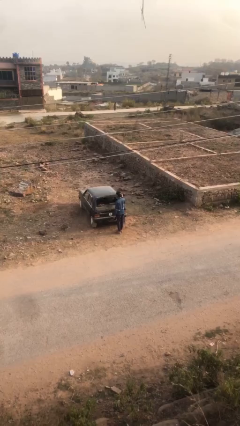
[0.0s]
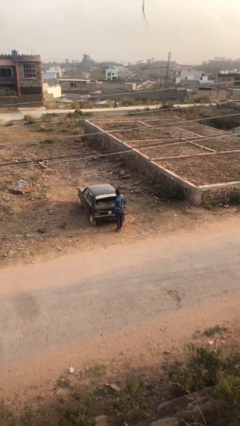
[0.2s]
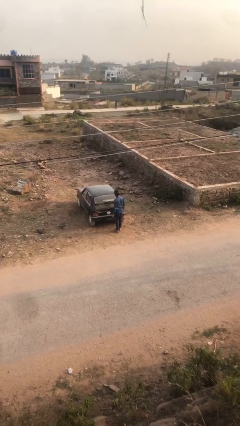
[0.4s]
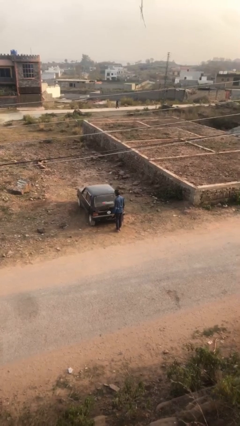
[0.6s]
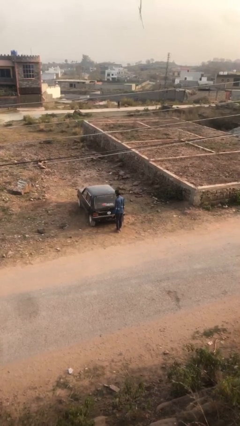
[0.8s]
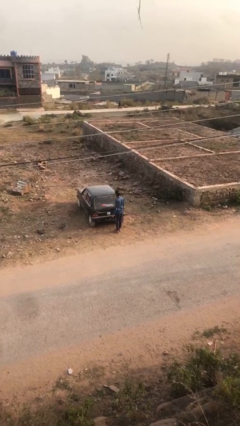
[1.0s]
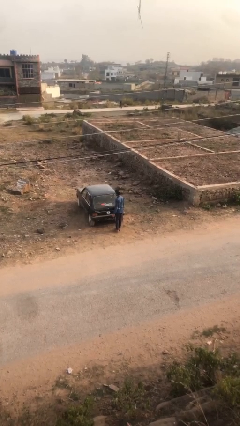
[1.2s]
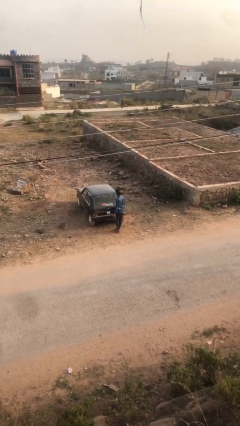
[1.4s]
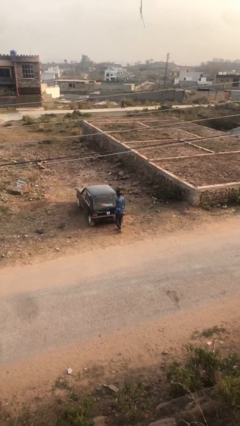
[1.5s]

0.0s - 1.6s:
person closes car trunk

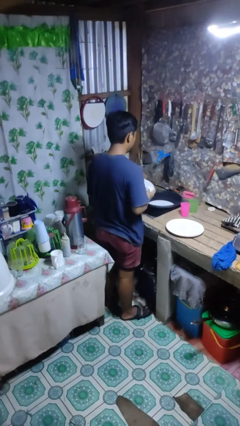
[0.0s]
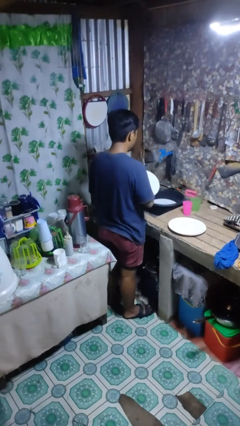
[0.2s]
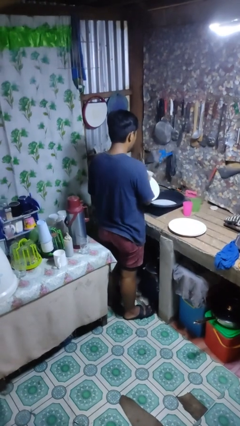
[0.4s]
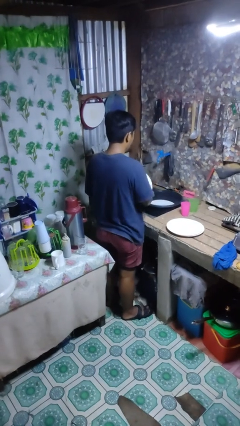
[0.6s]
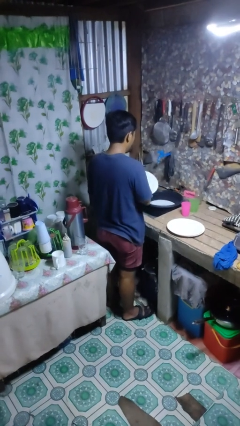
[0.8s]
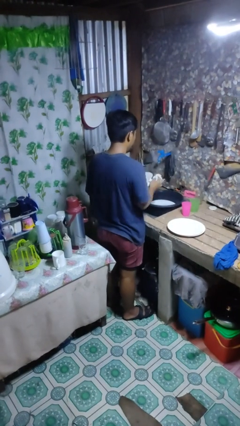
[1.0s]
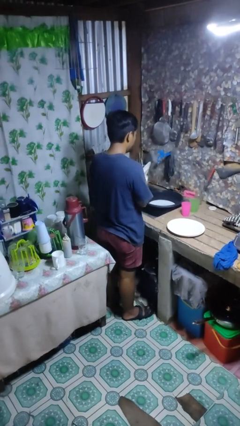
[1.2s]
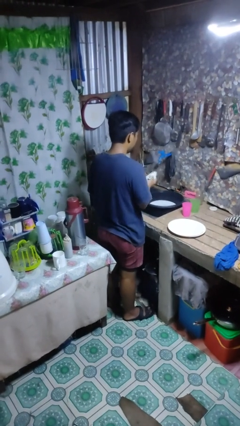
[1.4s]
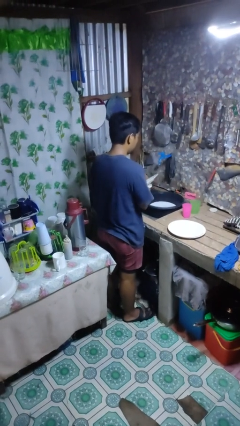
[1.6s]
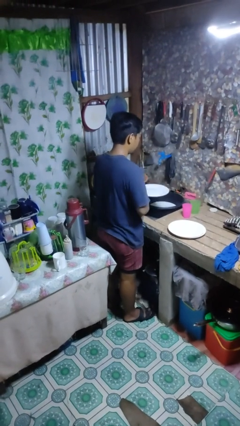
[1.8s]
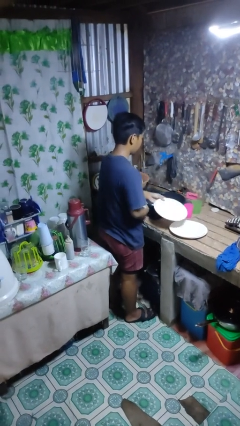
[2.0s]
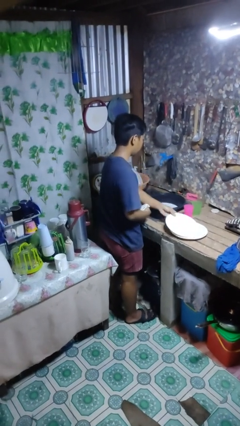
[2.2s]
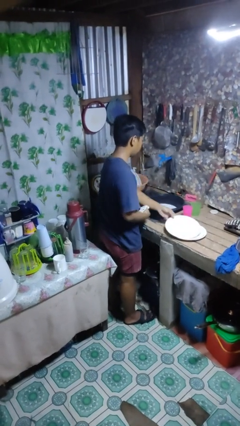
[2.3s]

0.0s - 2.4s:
person dries dish

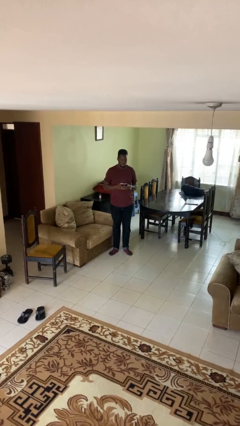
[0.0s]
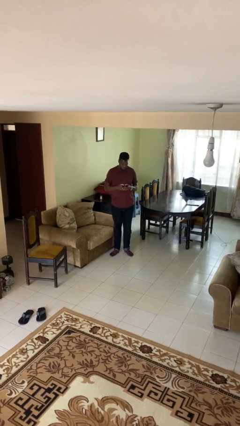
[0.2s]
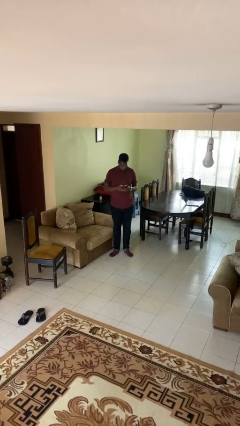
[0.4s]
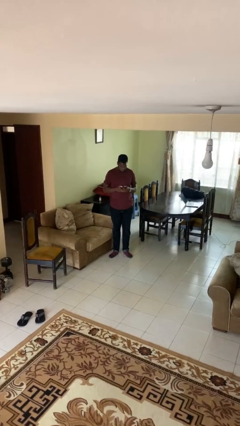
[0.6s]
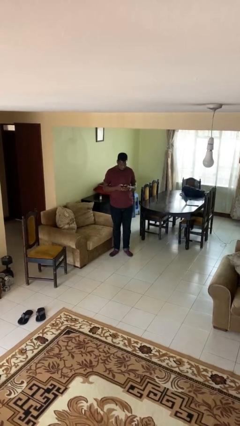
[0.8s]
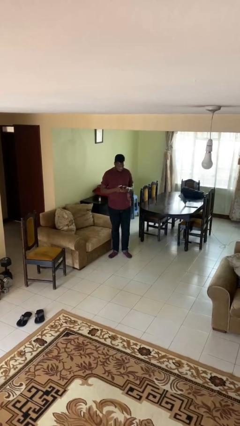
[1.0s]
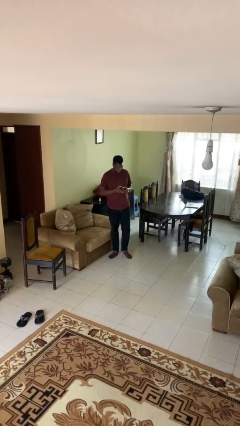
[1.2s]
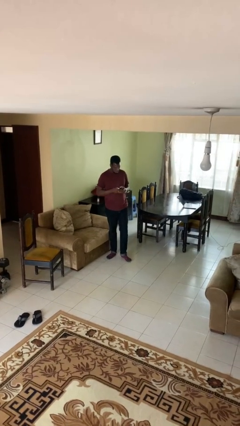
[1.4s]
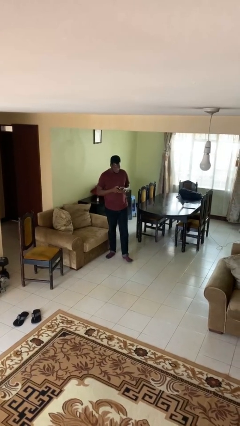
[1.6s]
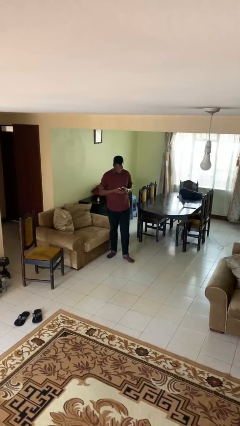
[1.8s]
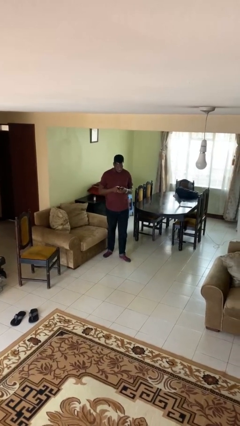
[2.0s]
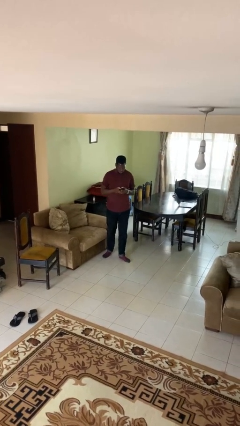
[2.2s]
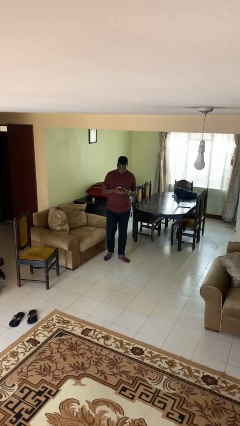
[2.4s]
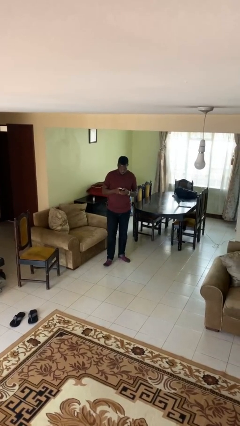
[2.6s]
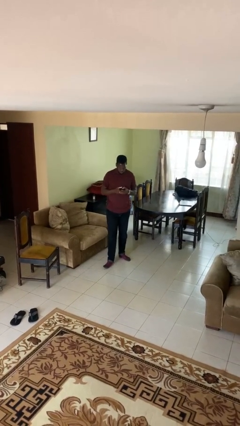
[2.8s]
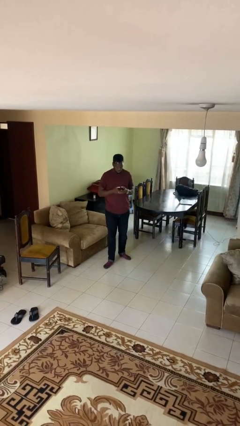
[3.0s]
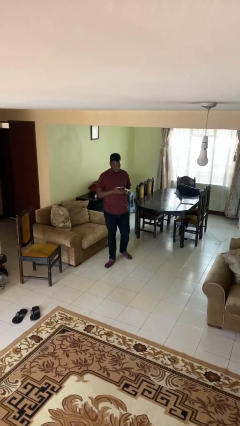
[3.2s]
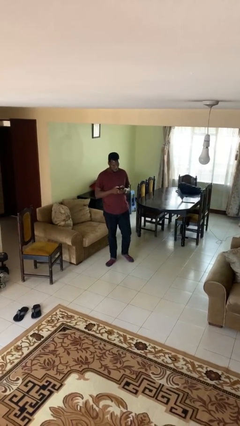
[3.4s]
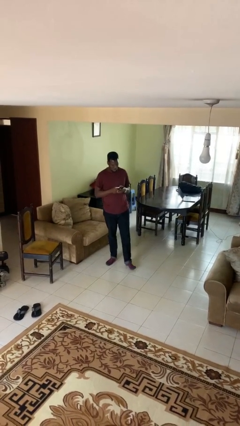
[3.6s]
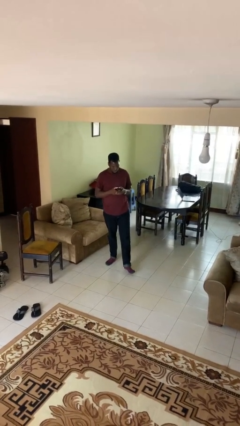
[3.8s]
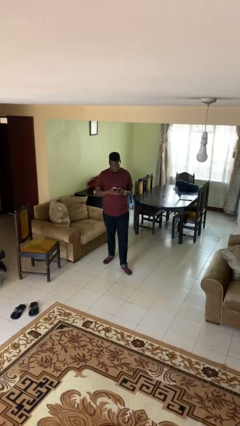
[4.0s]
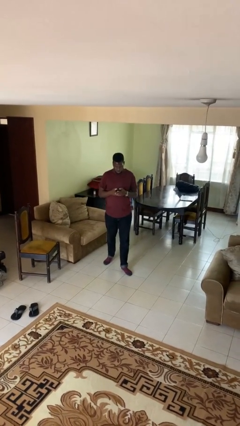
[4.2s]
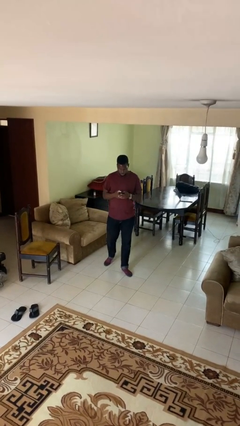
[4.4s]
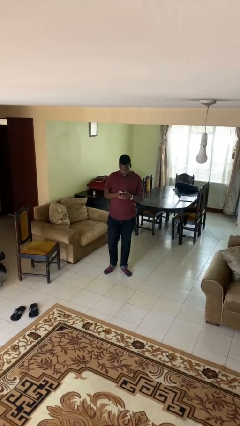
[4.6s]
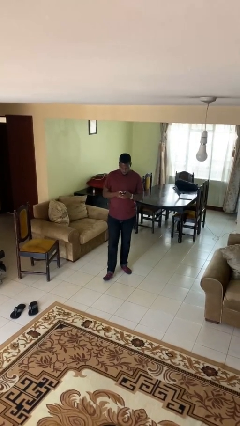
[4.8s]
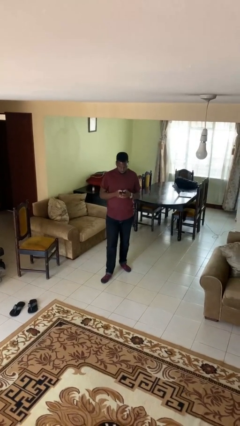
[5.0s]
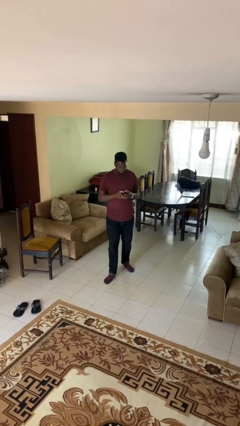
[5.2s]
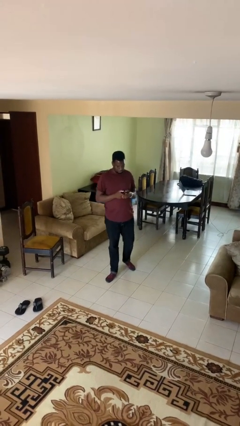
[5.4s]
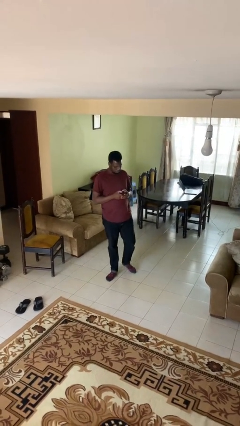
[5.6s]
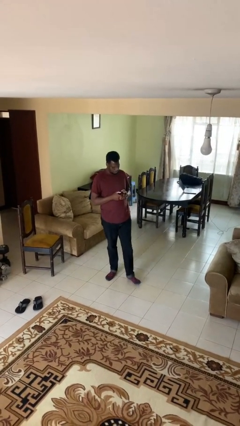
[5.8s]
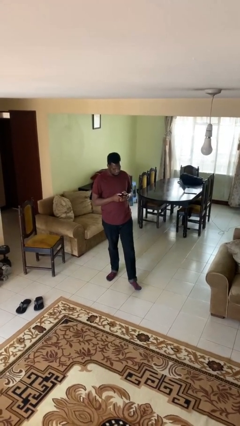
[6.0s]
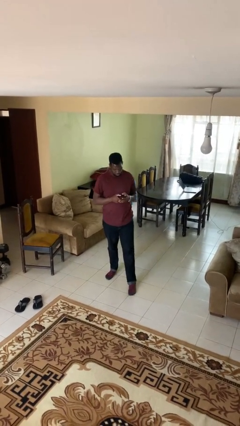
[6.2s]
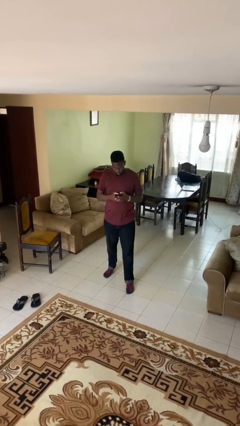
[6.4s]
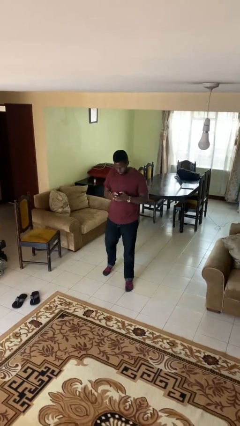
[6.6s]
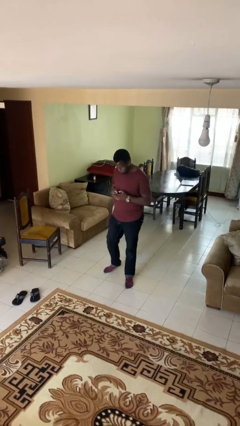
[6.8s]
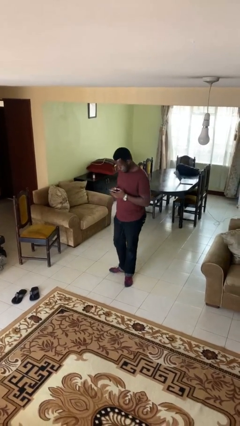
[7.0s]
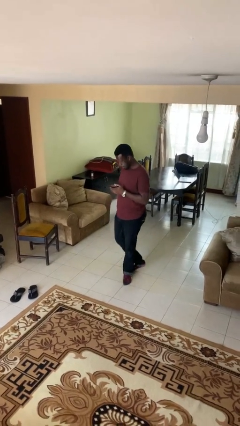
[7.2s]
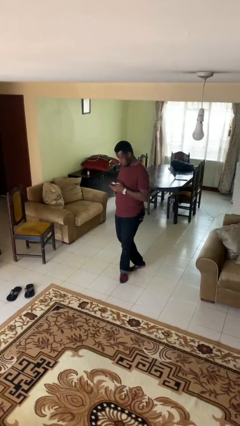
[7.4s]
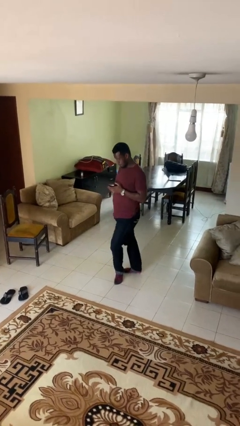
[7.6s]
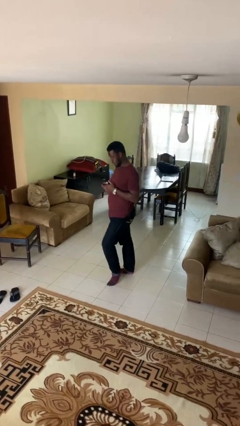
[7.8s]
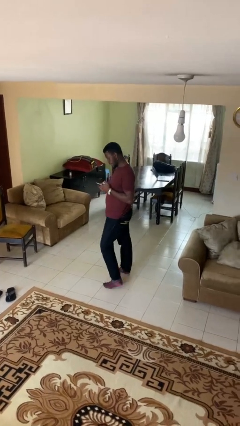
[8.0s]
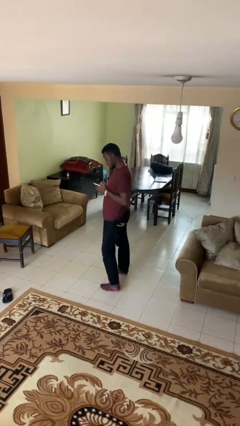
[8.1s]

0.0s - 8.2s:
person texts on phone

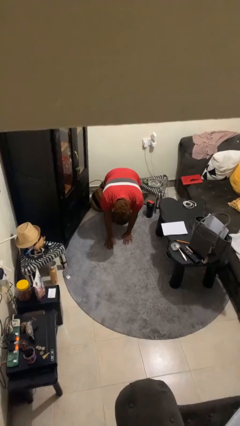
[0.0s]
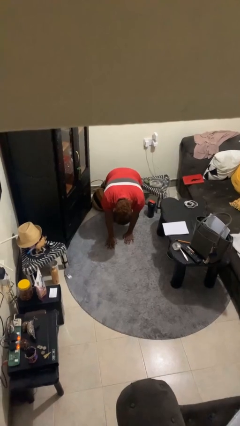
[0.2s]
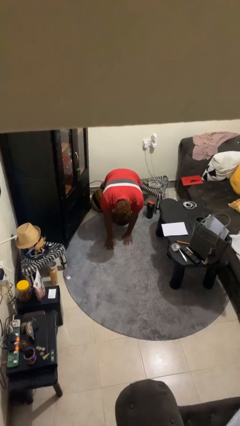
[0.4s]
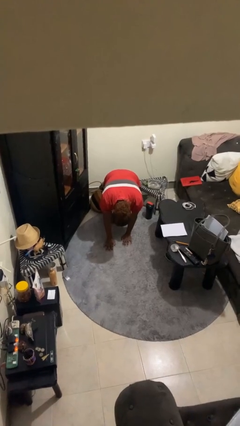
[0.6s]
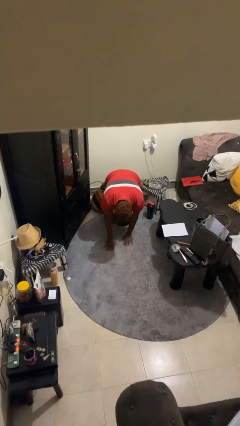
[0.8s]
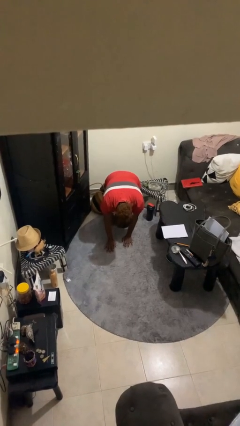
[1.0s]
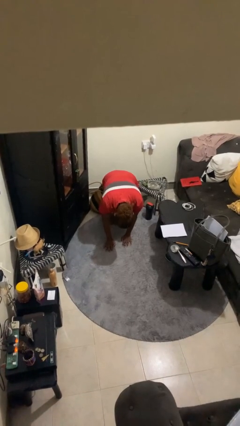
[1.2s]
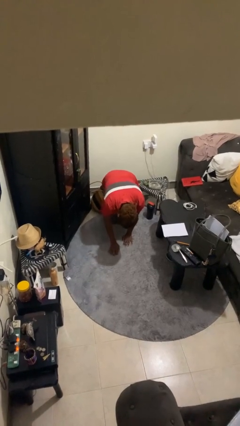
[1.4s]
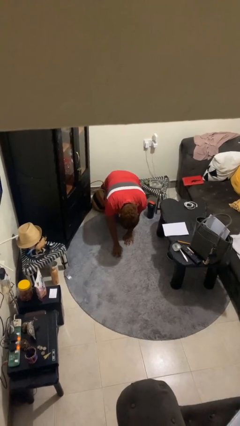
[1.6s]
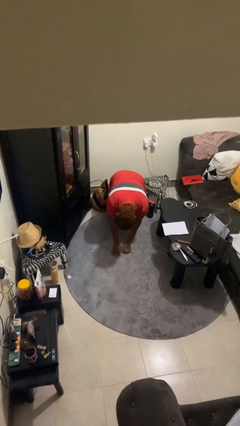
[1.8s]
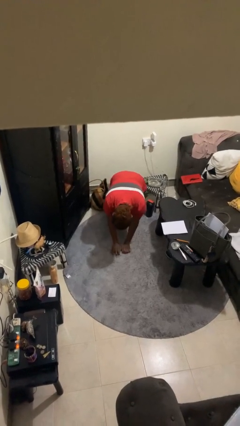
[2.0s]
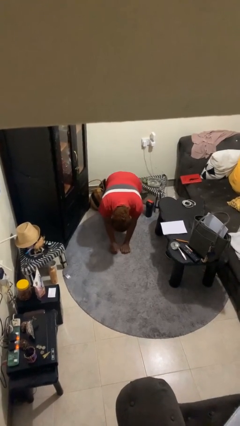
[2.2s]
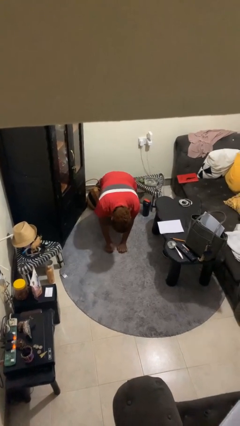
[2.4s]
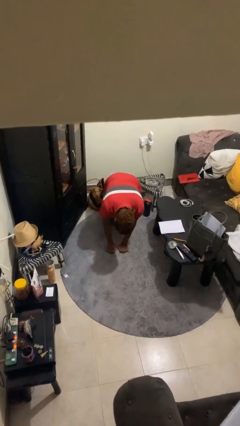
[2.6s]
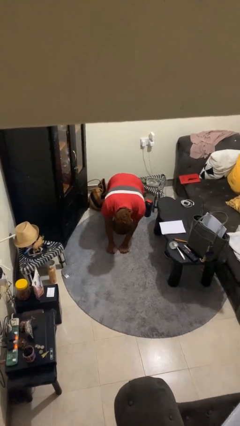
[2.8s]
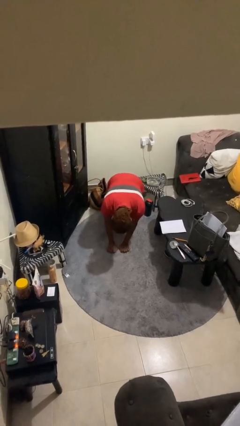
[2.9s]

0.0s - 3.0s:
person crawls

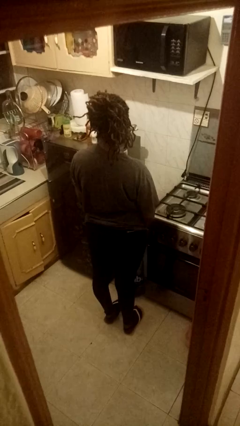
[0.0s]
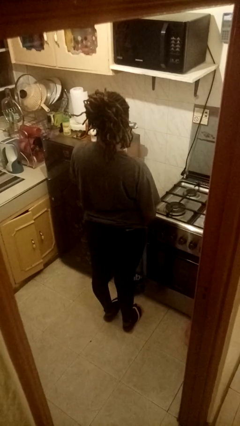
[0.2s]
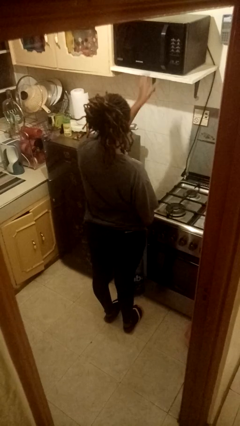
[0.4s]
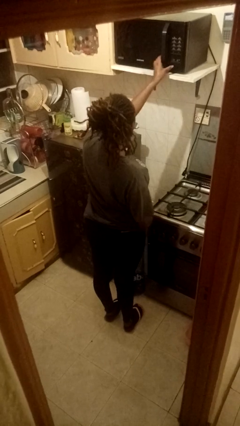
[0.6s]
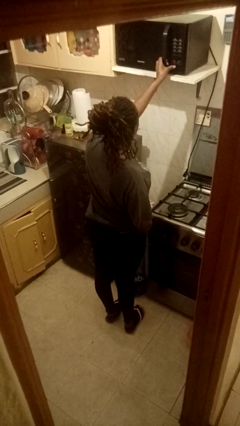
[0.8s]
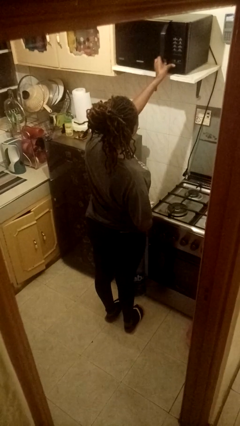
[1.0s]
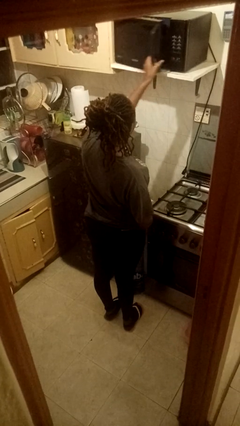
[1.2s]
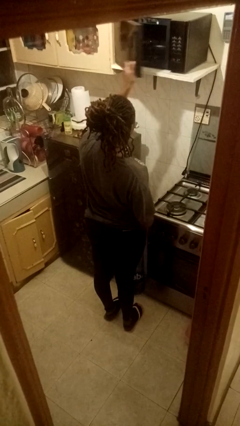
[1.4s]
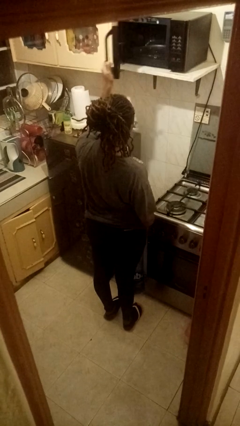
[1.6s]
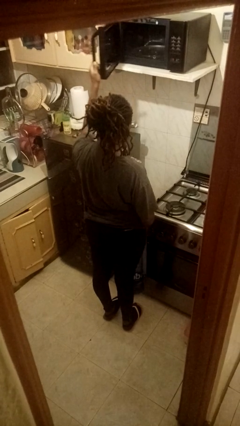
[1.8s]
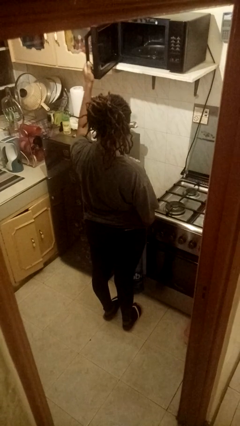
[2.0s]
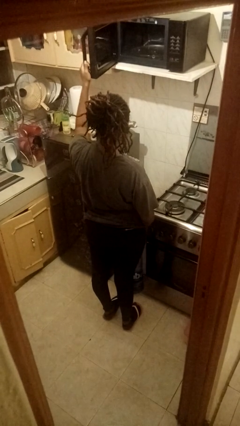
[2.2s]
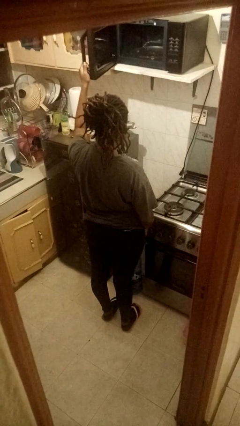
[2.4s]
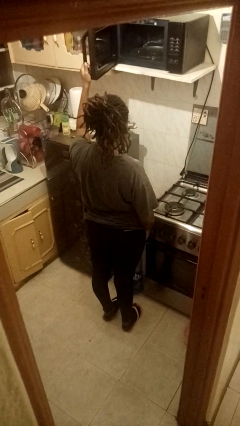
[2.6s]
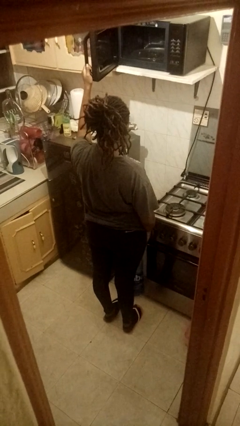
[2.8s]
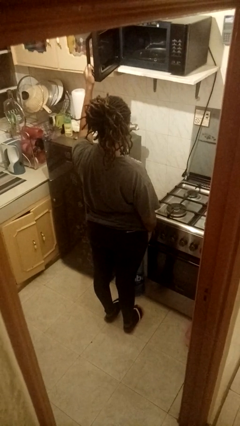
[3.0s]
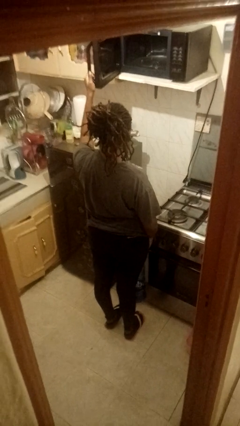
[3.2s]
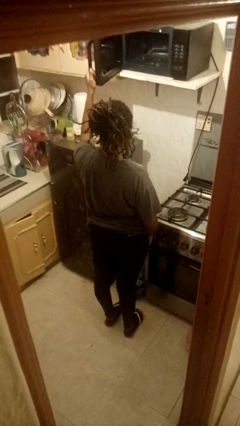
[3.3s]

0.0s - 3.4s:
person opens microwave
